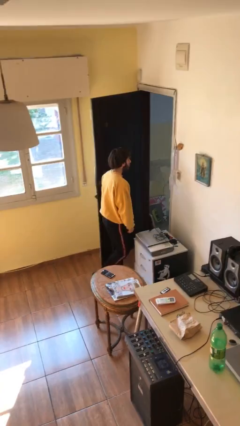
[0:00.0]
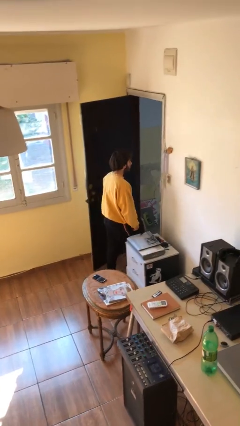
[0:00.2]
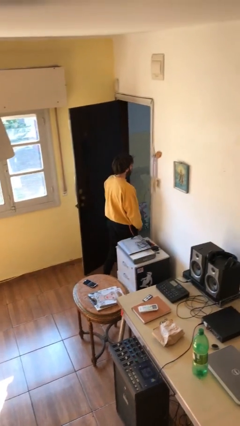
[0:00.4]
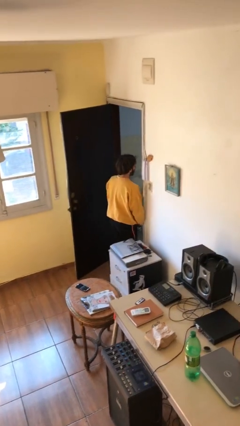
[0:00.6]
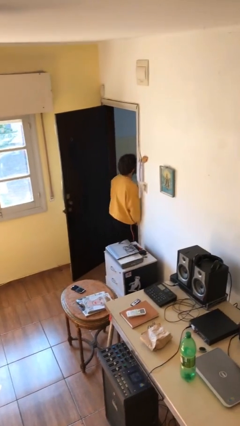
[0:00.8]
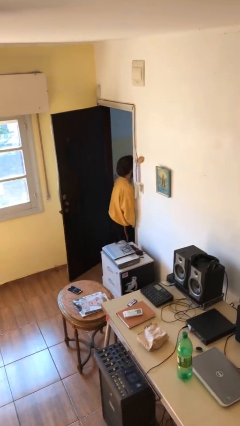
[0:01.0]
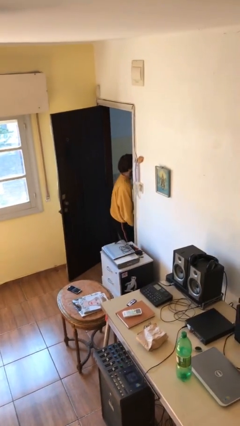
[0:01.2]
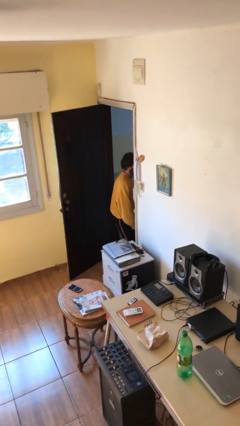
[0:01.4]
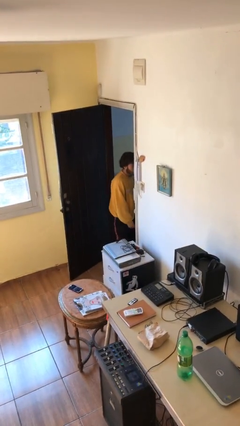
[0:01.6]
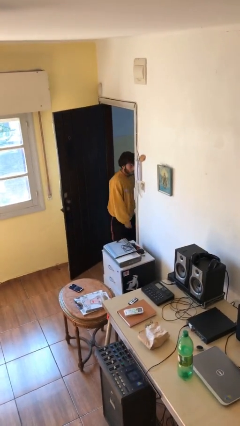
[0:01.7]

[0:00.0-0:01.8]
person bumps into wall

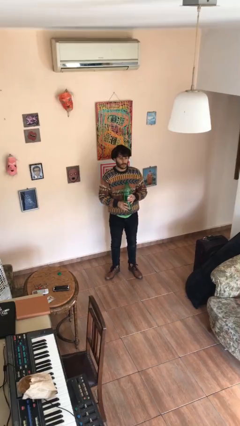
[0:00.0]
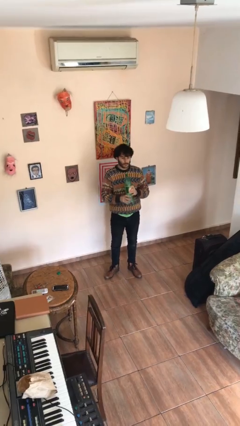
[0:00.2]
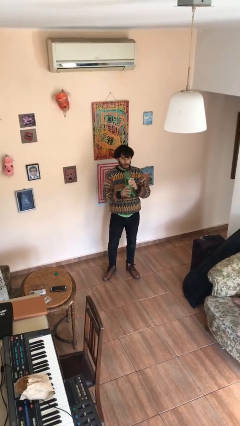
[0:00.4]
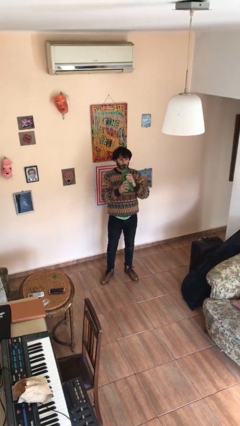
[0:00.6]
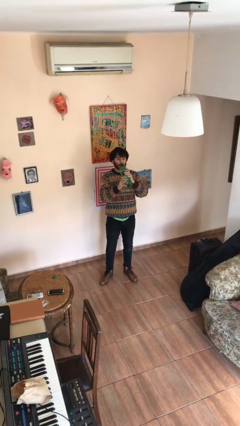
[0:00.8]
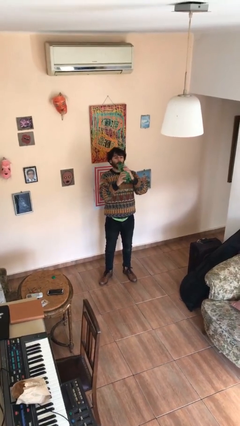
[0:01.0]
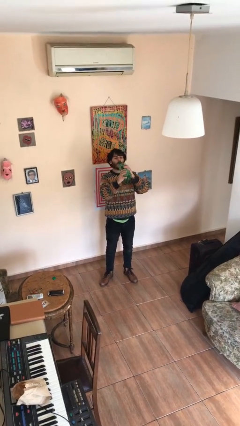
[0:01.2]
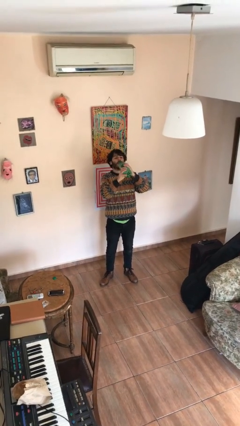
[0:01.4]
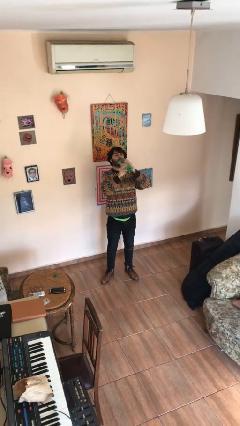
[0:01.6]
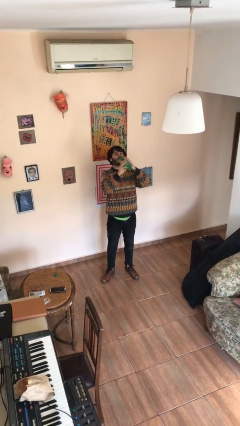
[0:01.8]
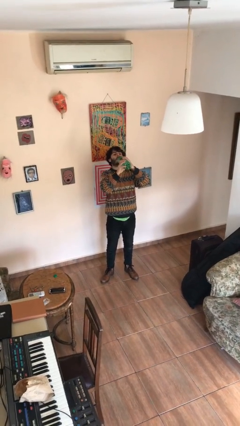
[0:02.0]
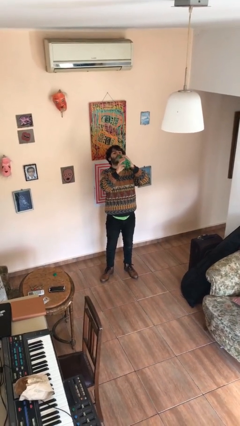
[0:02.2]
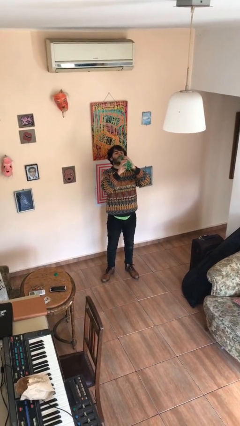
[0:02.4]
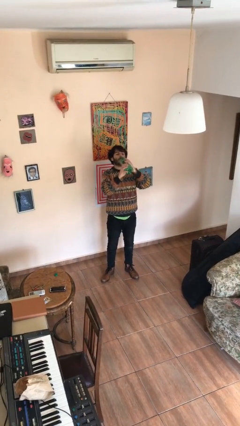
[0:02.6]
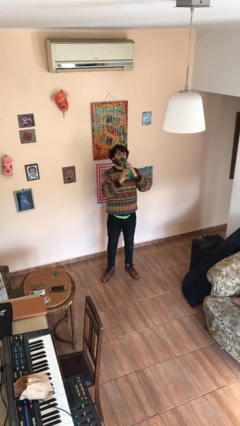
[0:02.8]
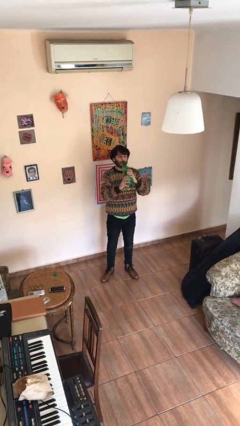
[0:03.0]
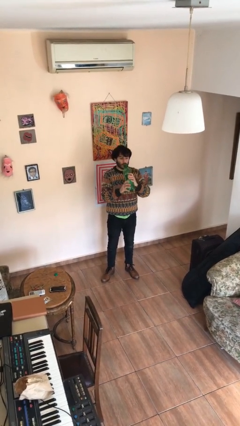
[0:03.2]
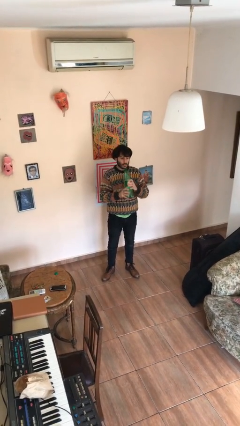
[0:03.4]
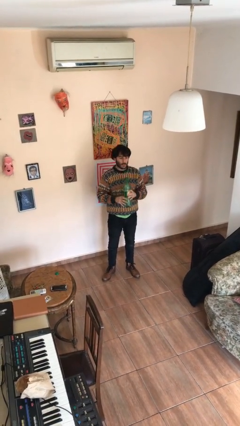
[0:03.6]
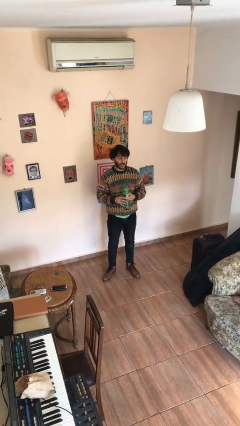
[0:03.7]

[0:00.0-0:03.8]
person drinks from bottle

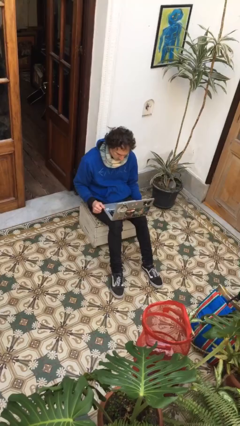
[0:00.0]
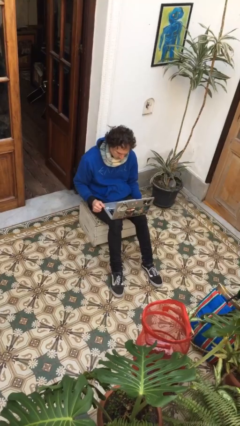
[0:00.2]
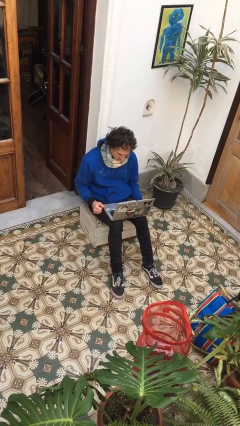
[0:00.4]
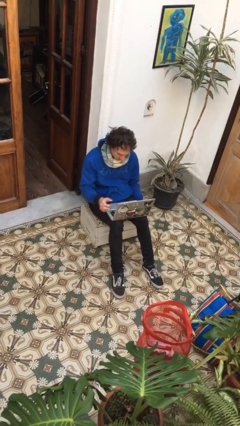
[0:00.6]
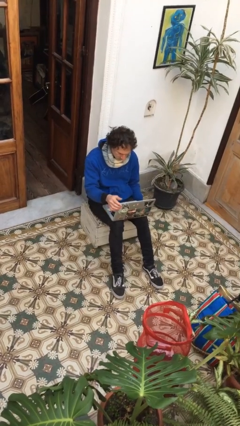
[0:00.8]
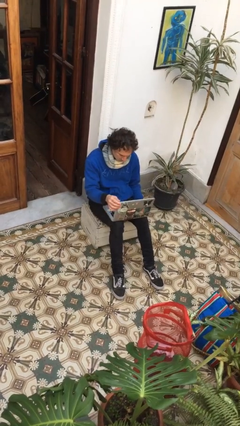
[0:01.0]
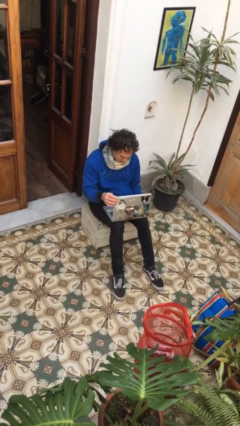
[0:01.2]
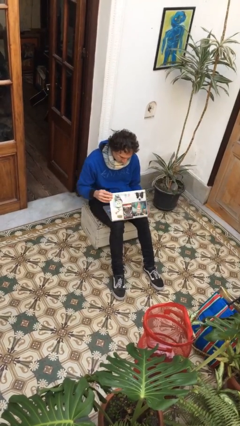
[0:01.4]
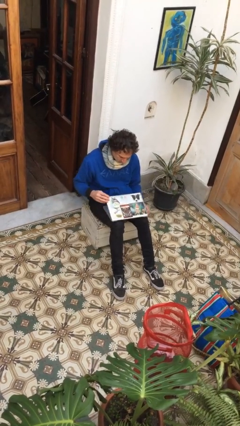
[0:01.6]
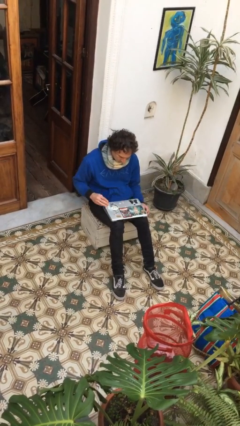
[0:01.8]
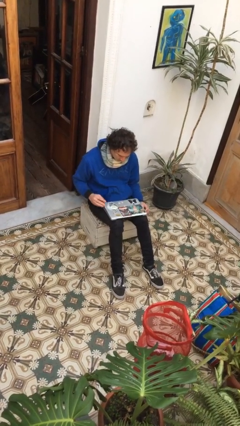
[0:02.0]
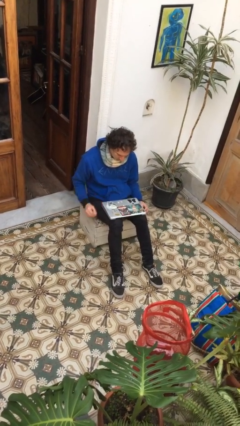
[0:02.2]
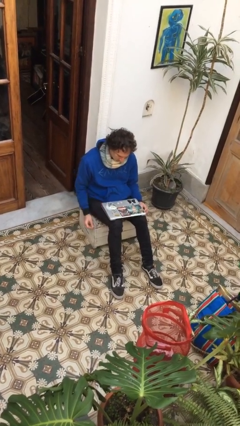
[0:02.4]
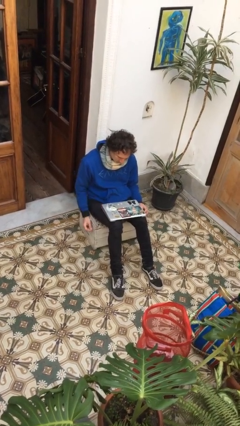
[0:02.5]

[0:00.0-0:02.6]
person closes laptop

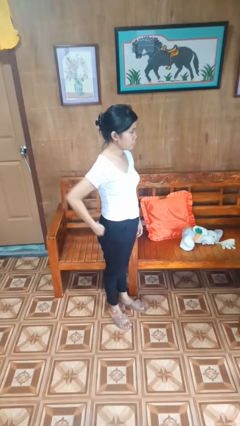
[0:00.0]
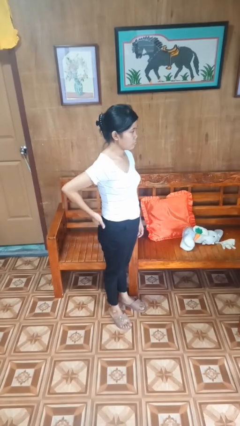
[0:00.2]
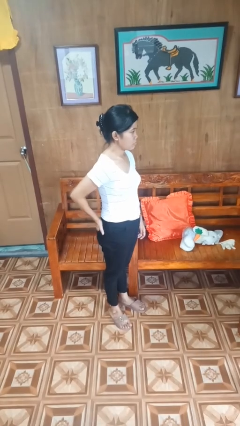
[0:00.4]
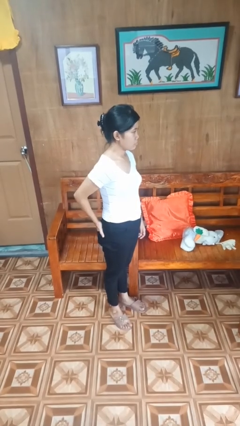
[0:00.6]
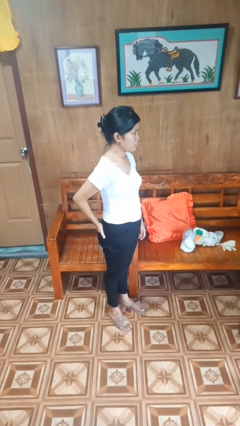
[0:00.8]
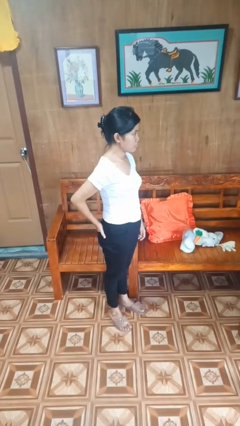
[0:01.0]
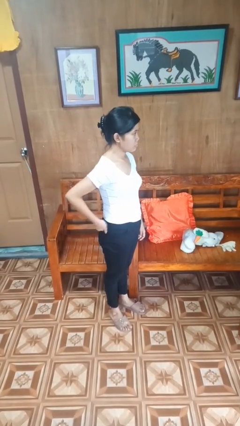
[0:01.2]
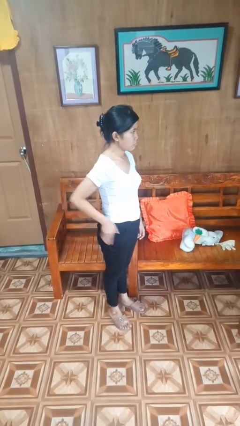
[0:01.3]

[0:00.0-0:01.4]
person puts hands in back pockets

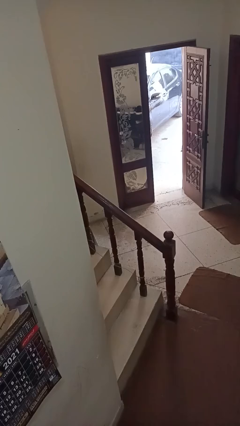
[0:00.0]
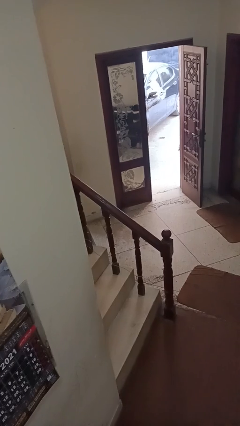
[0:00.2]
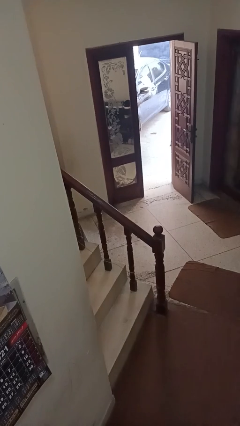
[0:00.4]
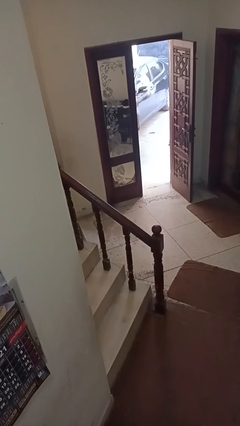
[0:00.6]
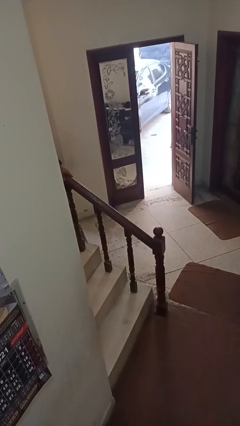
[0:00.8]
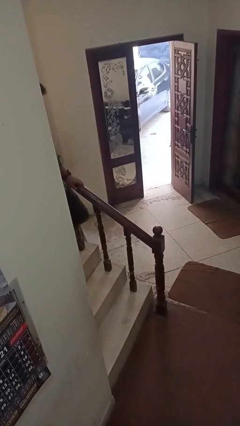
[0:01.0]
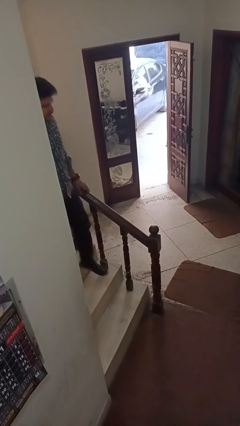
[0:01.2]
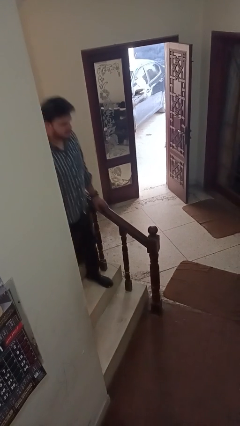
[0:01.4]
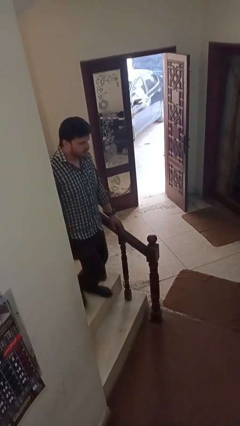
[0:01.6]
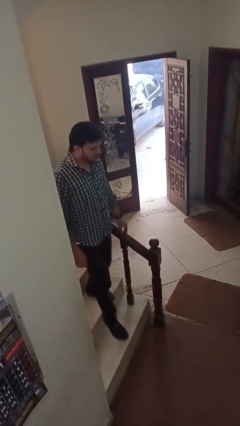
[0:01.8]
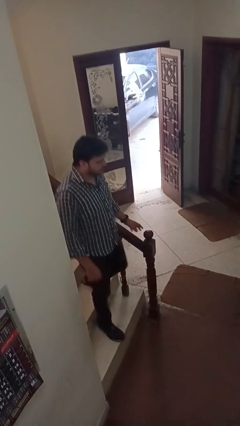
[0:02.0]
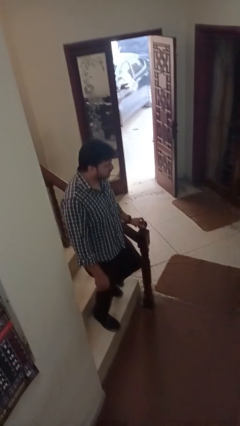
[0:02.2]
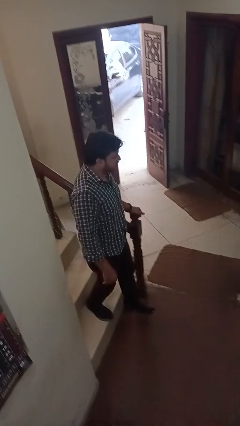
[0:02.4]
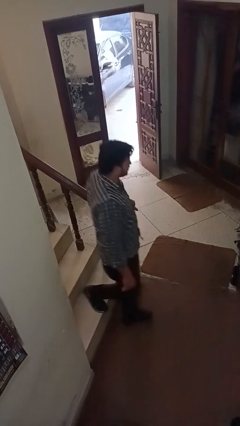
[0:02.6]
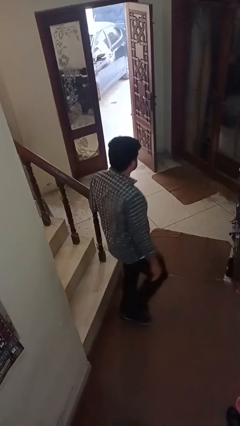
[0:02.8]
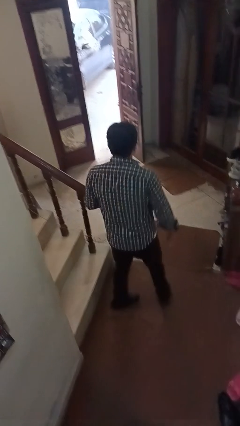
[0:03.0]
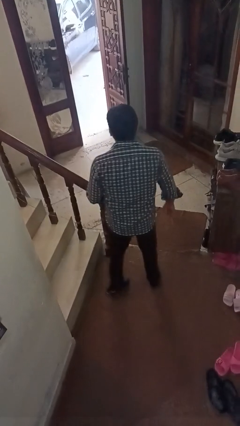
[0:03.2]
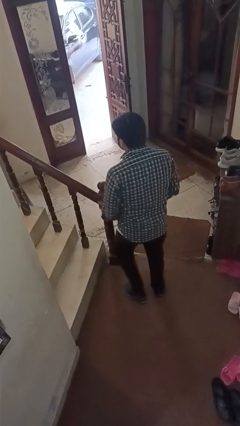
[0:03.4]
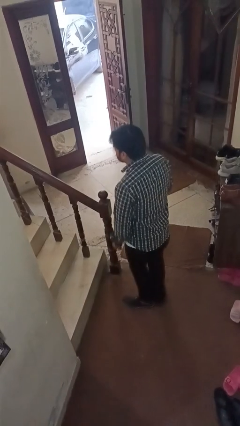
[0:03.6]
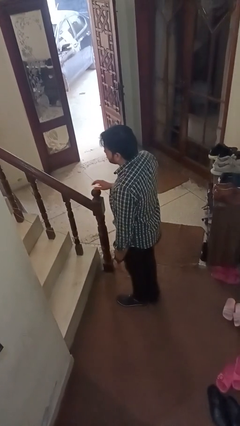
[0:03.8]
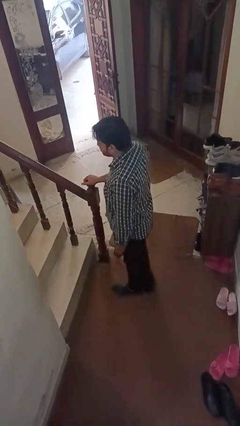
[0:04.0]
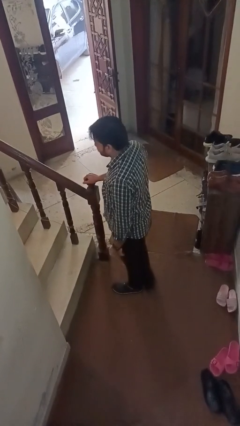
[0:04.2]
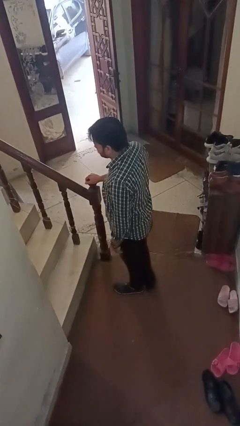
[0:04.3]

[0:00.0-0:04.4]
person climbs down stairs

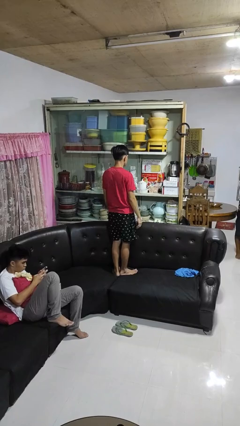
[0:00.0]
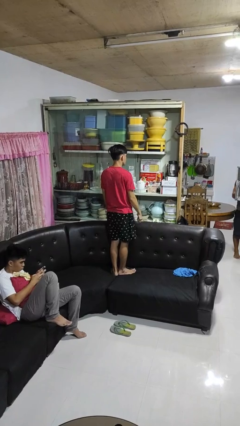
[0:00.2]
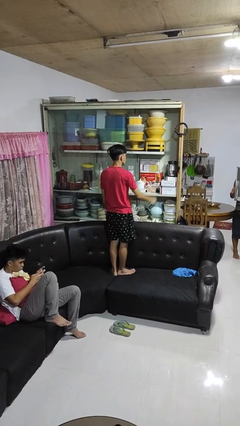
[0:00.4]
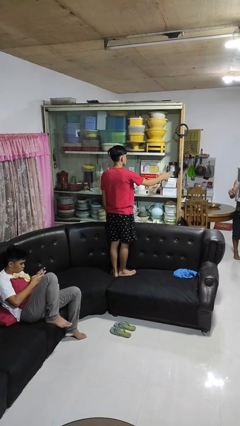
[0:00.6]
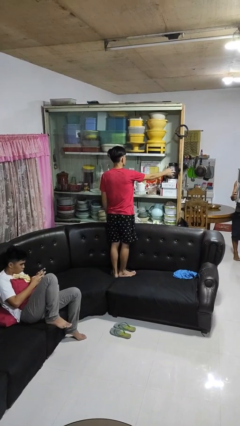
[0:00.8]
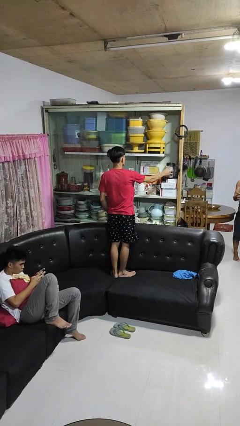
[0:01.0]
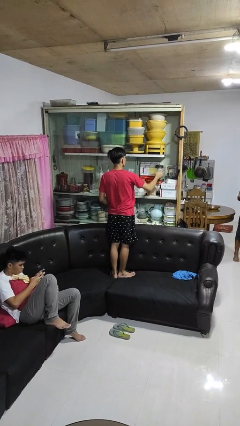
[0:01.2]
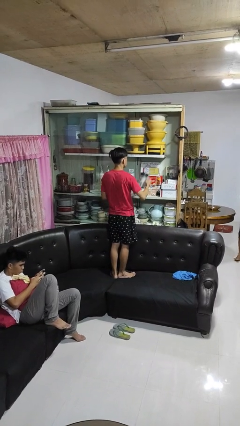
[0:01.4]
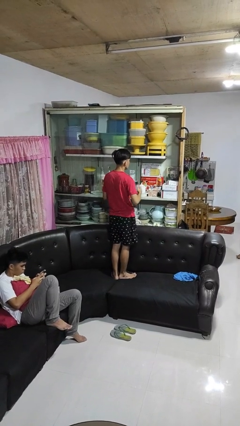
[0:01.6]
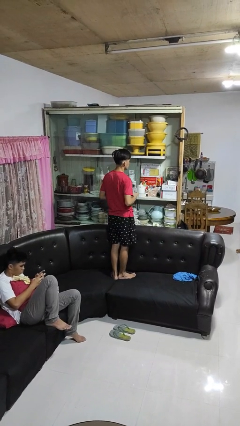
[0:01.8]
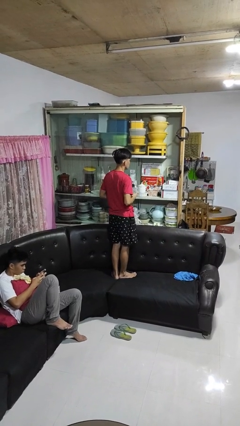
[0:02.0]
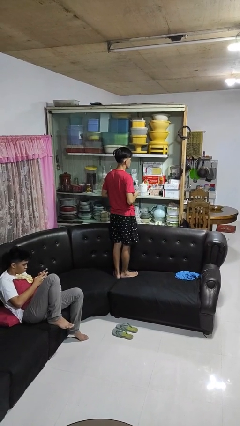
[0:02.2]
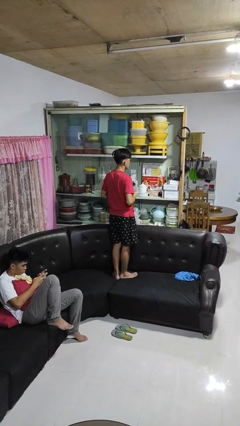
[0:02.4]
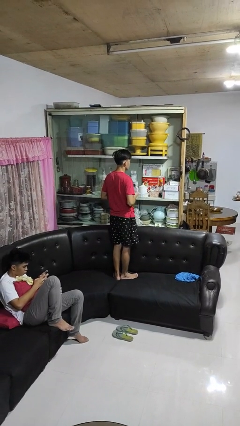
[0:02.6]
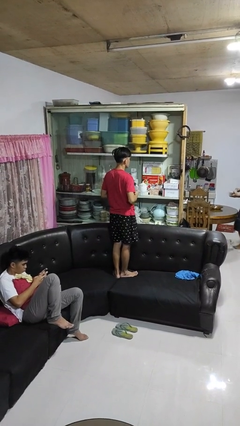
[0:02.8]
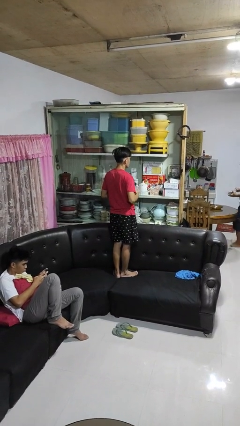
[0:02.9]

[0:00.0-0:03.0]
person picks up object from cabinet
